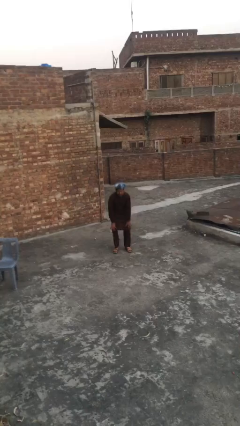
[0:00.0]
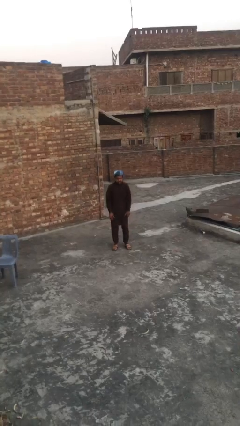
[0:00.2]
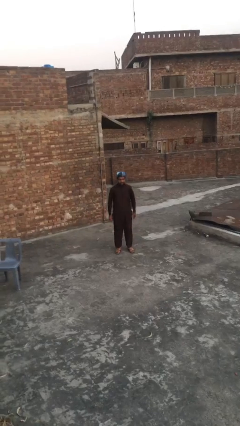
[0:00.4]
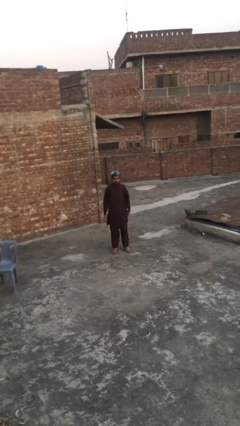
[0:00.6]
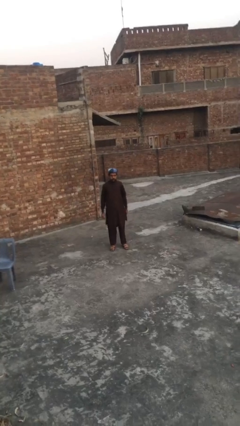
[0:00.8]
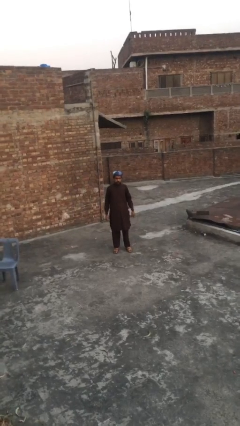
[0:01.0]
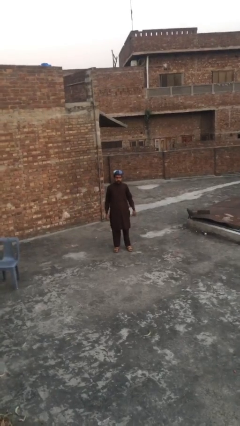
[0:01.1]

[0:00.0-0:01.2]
person stands up

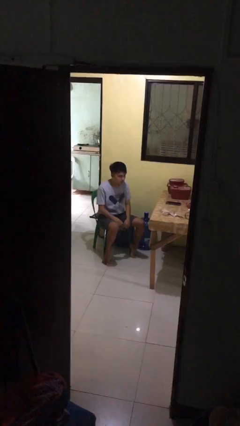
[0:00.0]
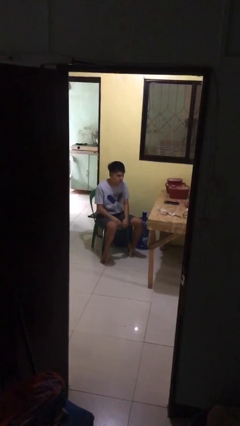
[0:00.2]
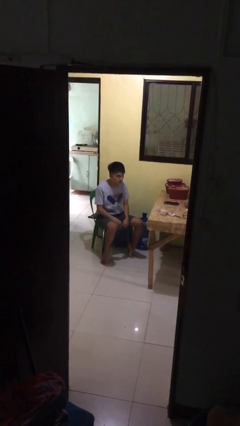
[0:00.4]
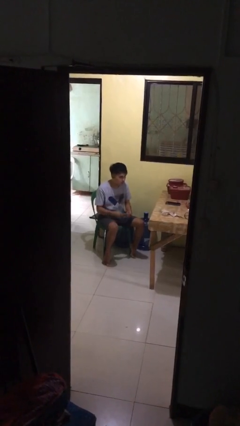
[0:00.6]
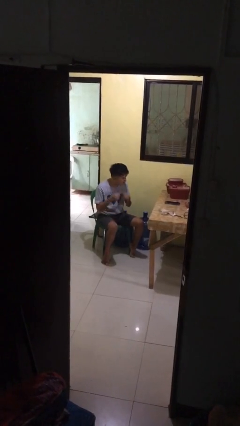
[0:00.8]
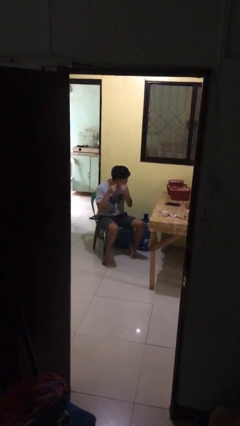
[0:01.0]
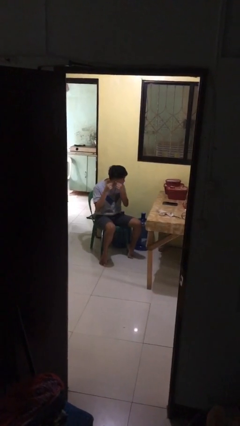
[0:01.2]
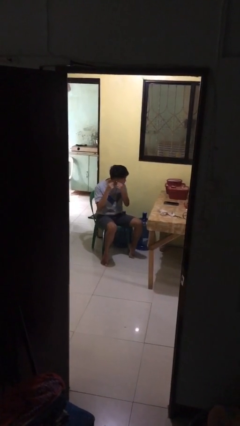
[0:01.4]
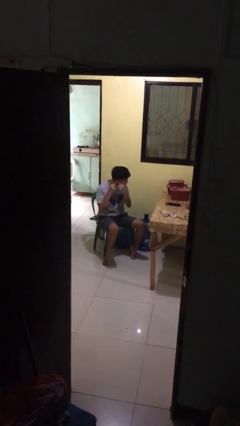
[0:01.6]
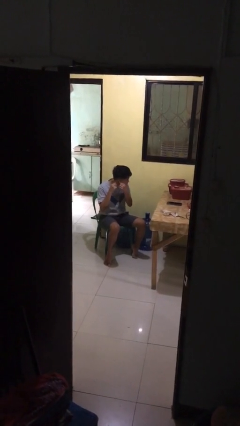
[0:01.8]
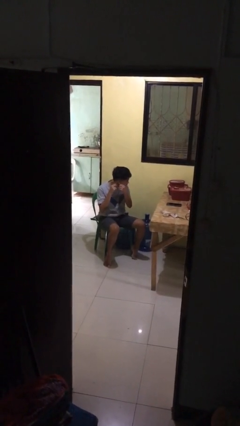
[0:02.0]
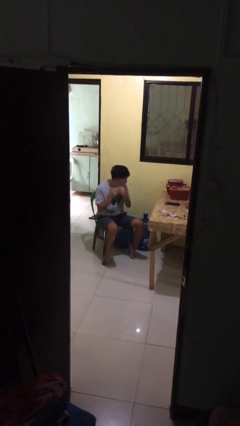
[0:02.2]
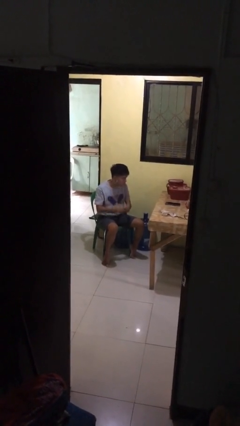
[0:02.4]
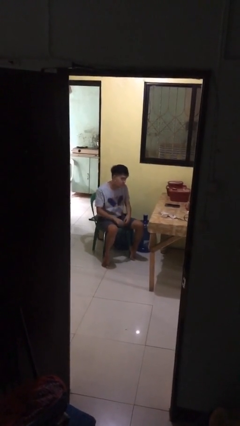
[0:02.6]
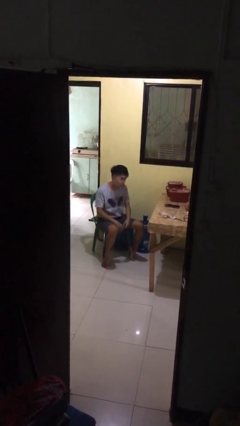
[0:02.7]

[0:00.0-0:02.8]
person puts on earrings

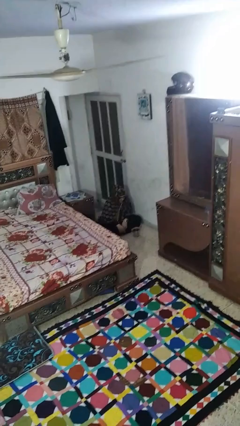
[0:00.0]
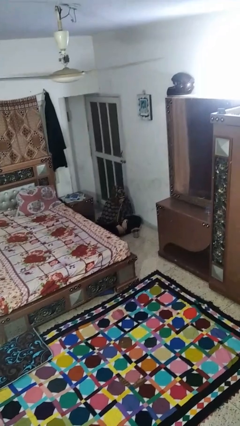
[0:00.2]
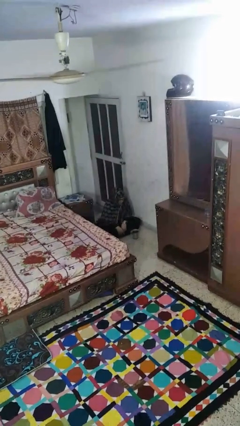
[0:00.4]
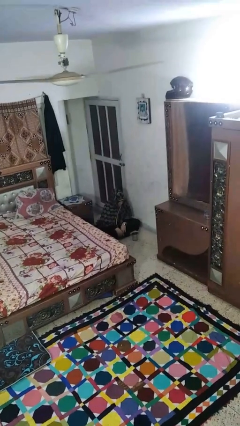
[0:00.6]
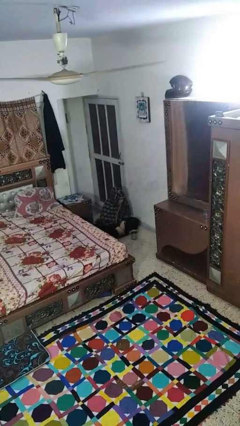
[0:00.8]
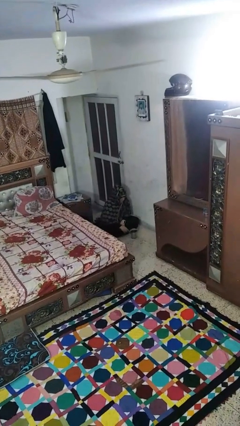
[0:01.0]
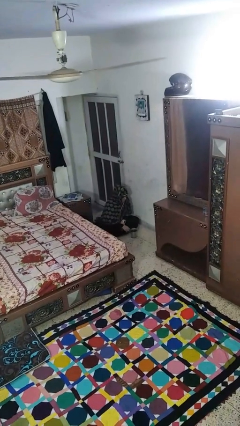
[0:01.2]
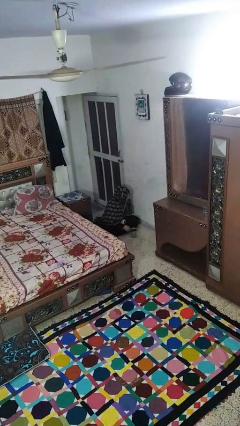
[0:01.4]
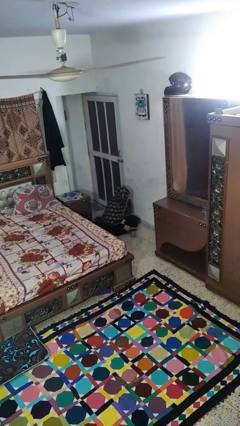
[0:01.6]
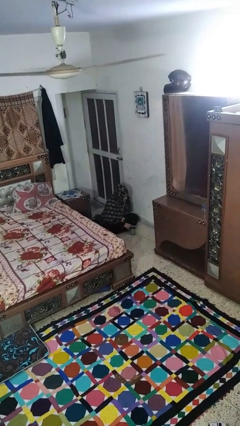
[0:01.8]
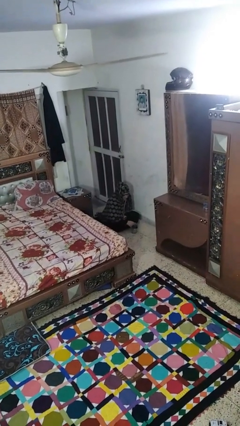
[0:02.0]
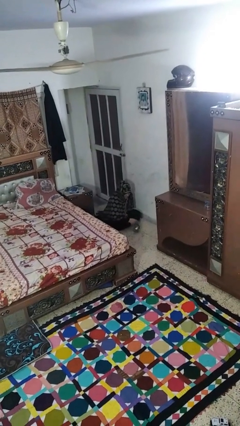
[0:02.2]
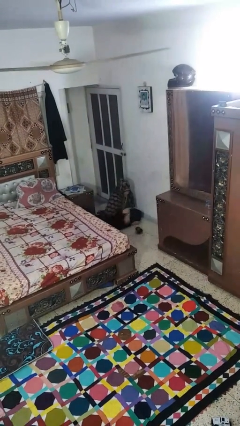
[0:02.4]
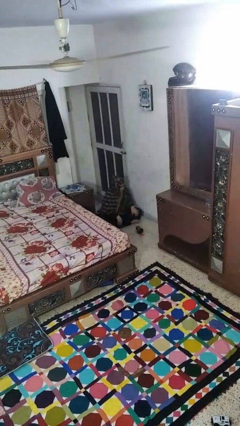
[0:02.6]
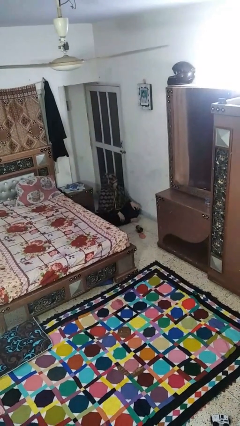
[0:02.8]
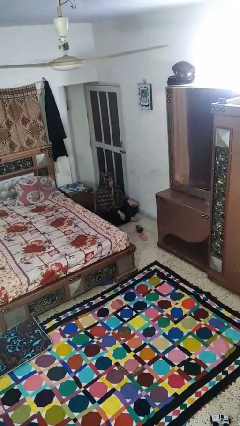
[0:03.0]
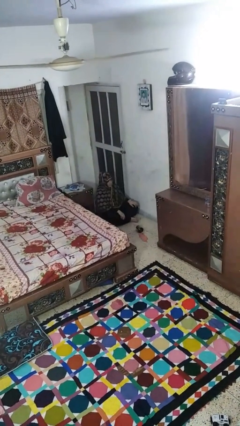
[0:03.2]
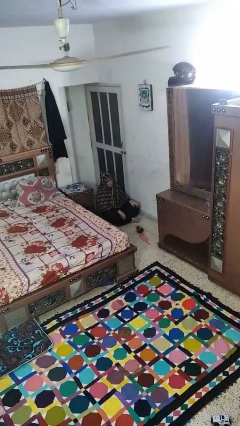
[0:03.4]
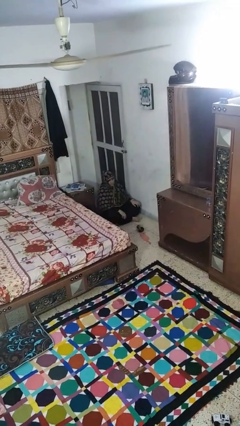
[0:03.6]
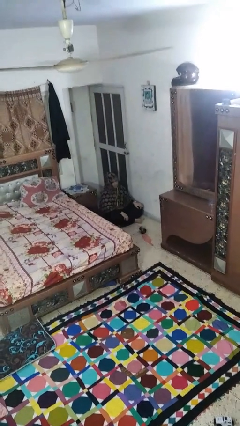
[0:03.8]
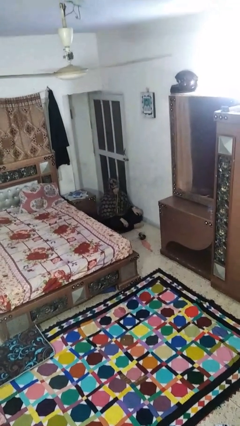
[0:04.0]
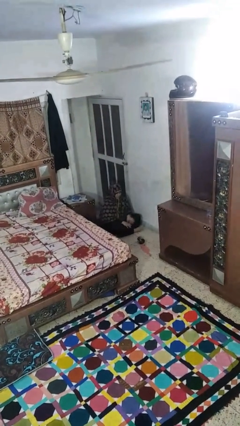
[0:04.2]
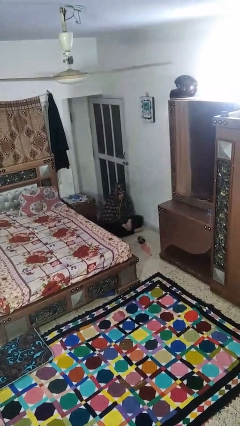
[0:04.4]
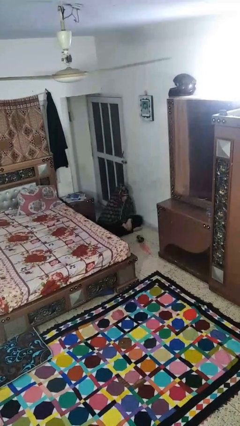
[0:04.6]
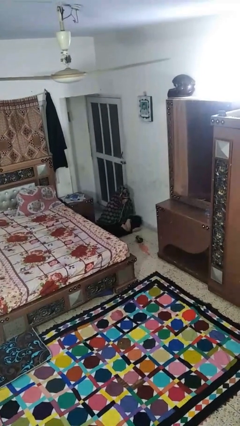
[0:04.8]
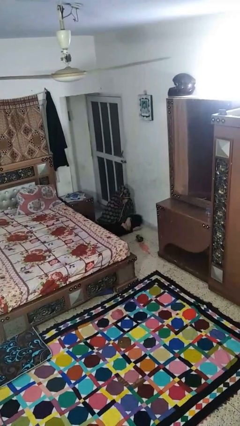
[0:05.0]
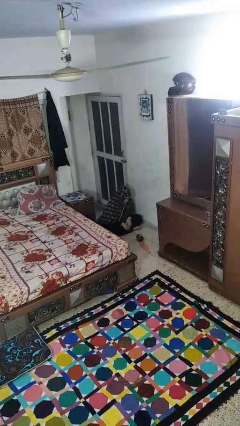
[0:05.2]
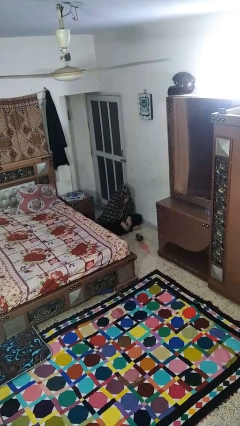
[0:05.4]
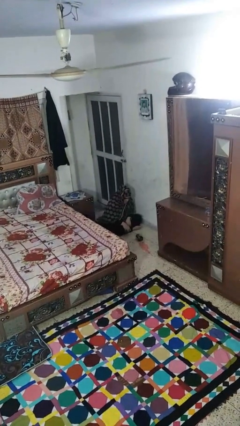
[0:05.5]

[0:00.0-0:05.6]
person spills on floor

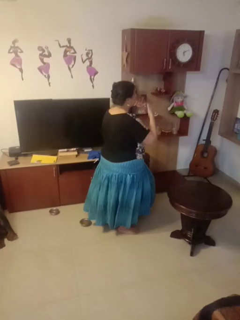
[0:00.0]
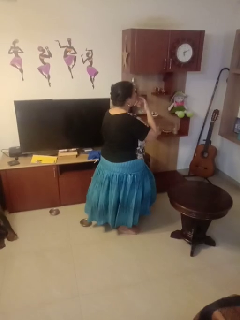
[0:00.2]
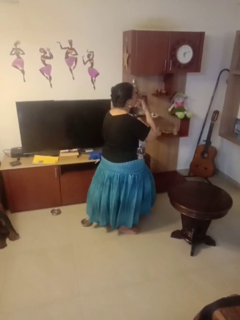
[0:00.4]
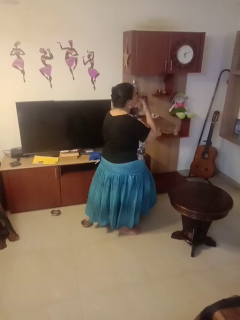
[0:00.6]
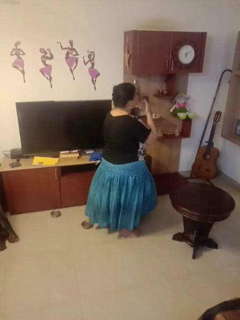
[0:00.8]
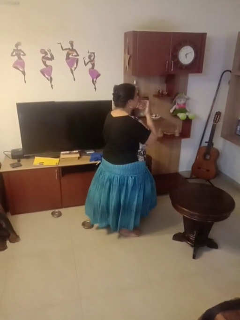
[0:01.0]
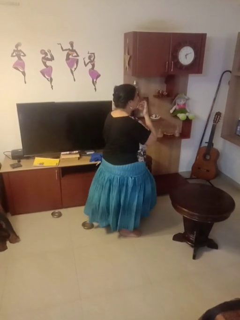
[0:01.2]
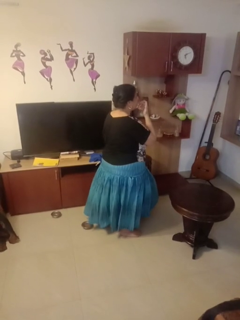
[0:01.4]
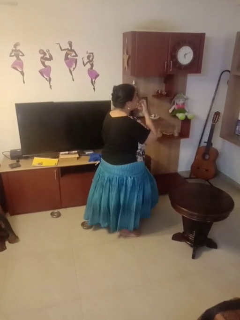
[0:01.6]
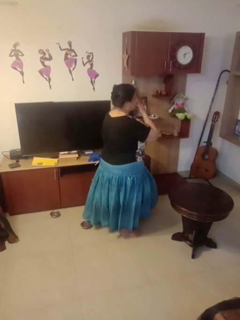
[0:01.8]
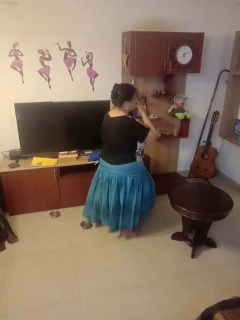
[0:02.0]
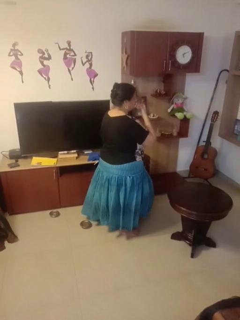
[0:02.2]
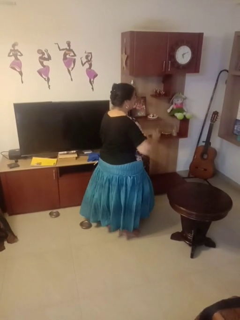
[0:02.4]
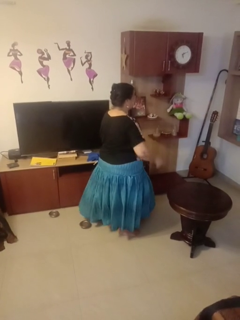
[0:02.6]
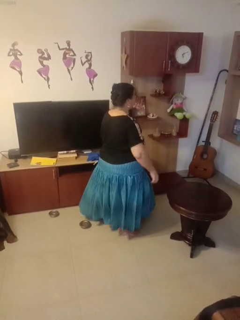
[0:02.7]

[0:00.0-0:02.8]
person licks fingers

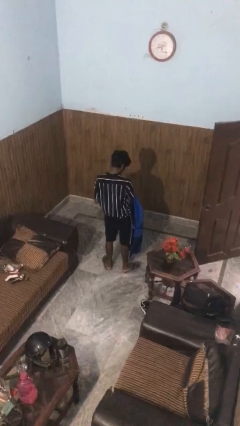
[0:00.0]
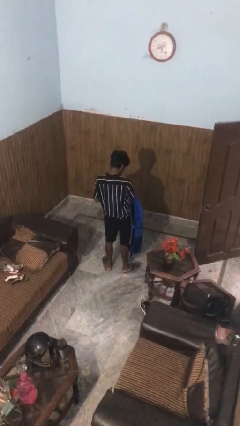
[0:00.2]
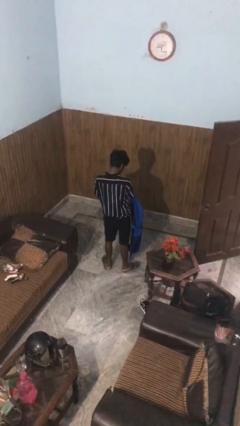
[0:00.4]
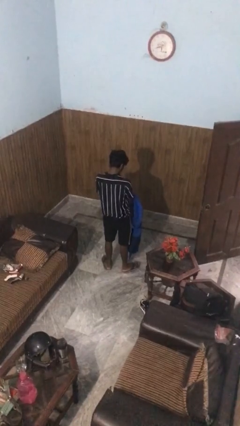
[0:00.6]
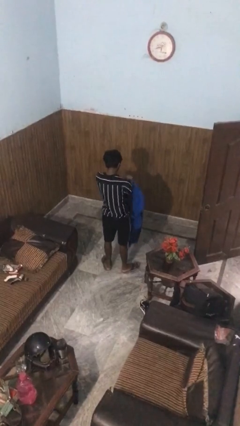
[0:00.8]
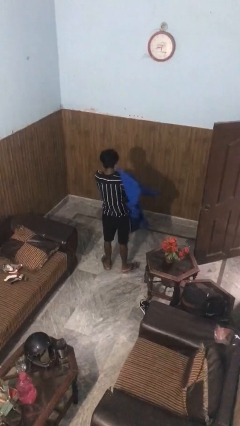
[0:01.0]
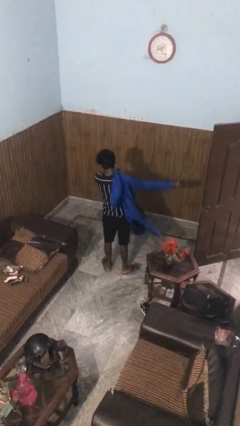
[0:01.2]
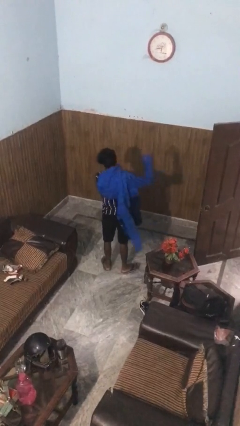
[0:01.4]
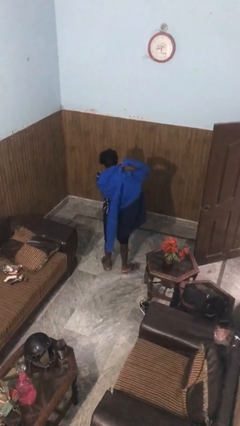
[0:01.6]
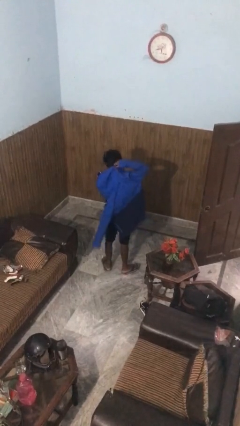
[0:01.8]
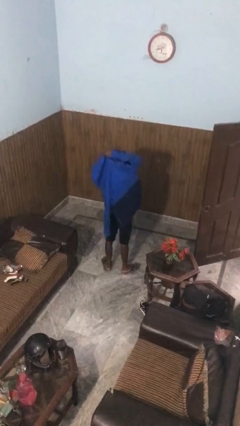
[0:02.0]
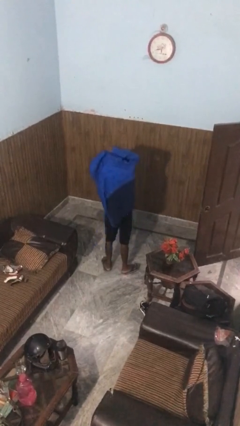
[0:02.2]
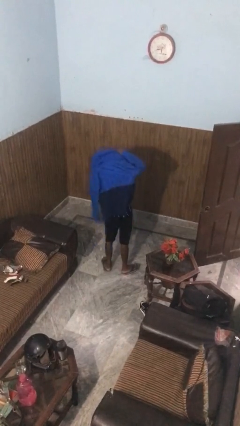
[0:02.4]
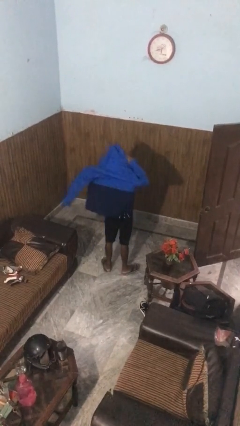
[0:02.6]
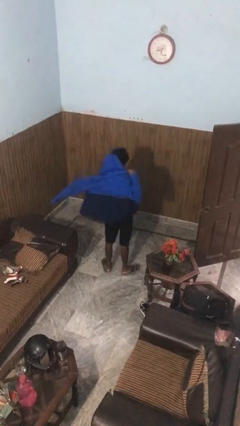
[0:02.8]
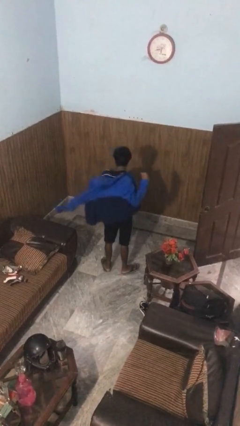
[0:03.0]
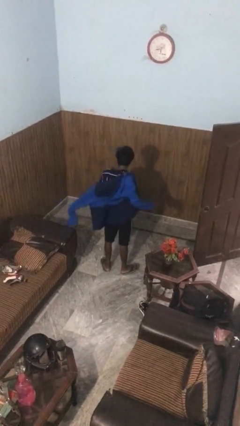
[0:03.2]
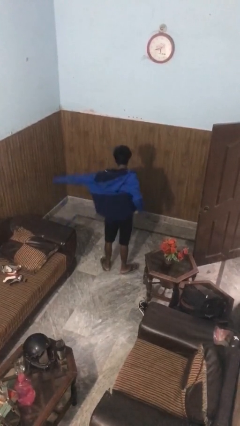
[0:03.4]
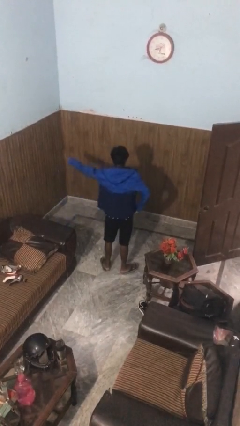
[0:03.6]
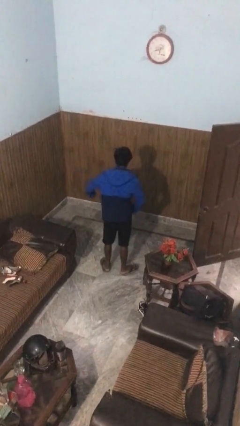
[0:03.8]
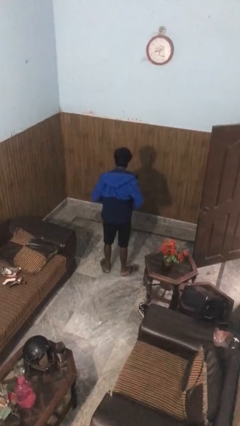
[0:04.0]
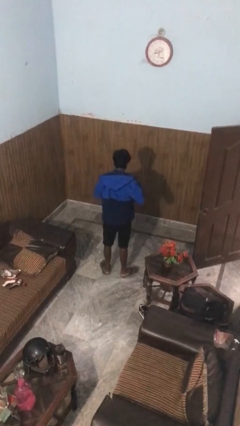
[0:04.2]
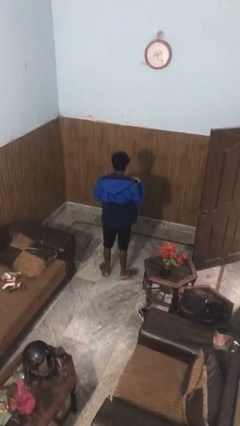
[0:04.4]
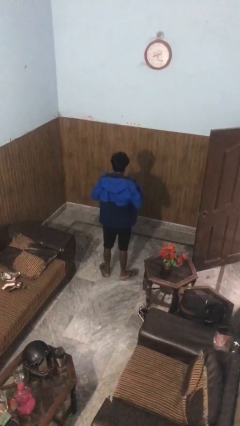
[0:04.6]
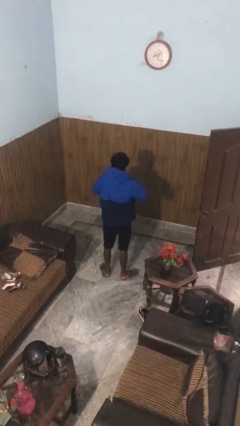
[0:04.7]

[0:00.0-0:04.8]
person puts on jacket

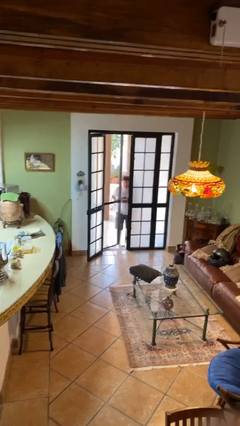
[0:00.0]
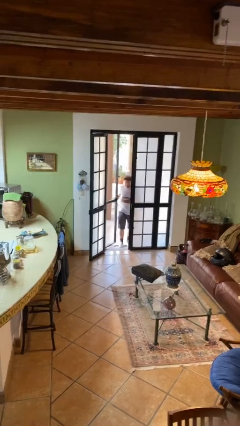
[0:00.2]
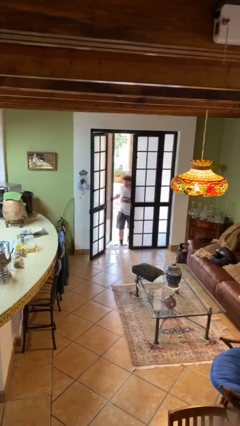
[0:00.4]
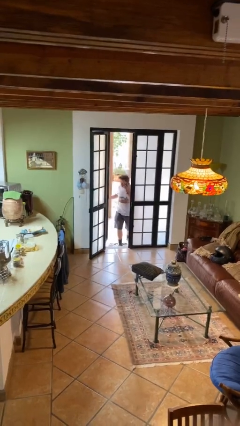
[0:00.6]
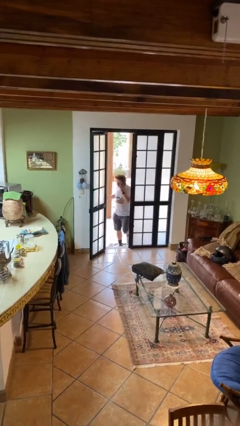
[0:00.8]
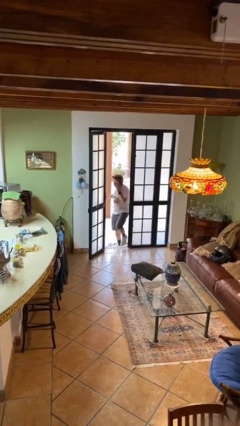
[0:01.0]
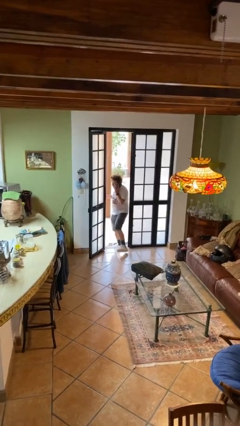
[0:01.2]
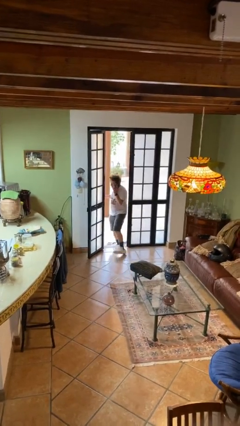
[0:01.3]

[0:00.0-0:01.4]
person opens facility door
